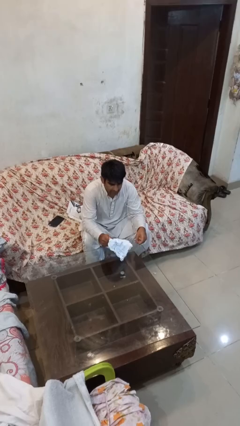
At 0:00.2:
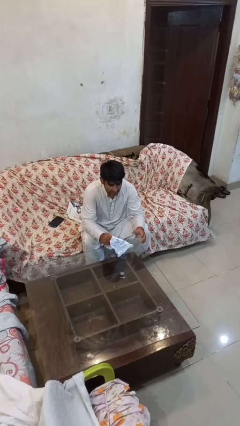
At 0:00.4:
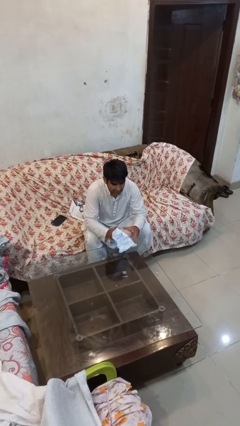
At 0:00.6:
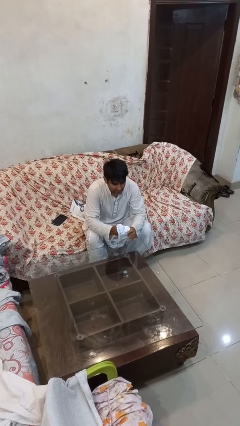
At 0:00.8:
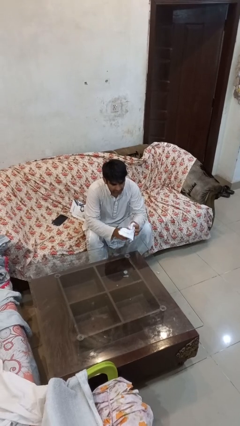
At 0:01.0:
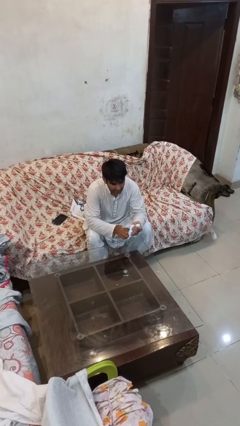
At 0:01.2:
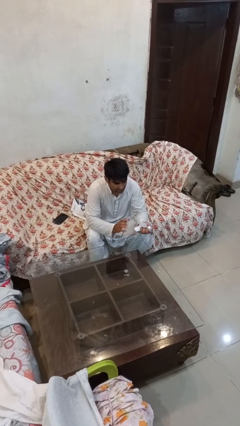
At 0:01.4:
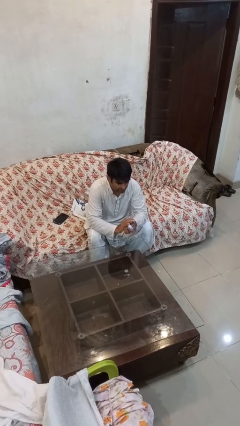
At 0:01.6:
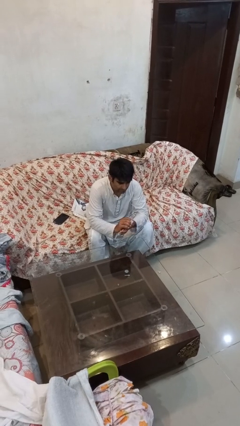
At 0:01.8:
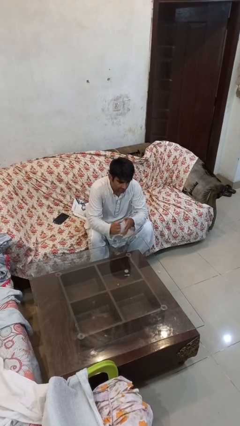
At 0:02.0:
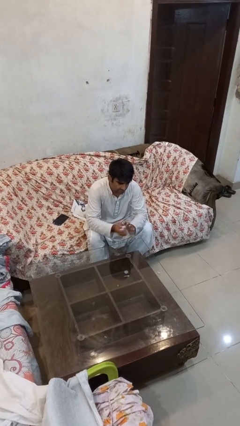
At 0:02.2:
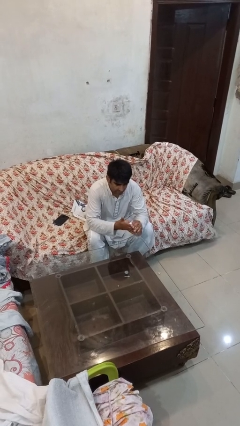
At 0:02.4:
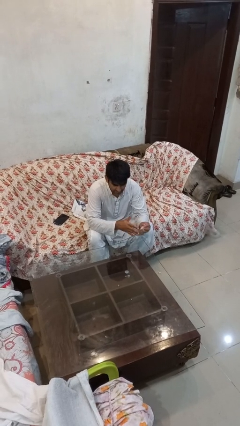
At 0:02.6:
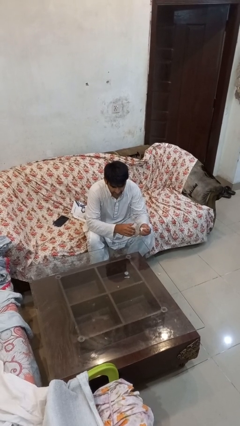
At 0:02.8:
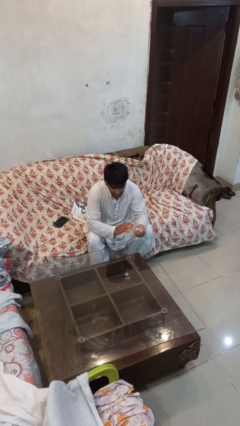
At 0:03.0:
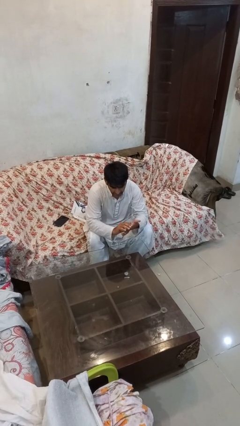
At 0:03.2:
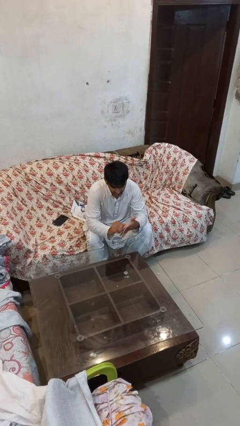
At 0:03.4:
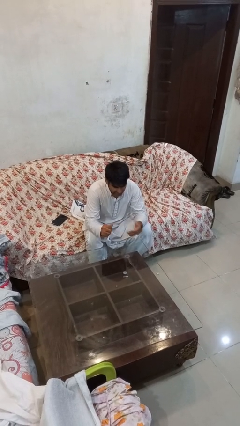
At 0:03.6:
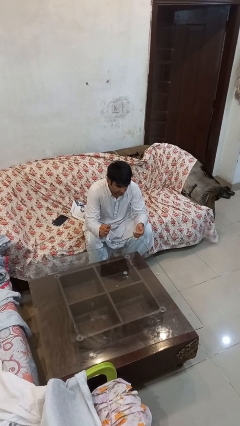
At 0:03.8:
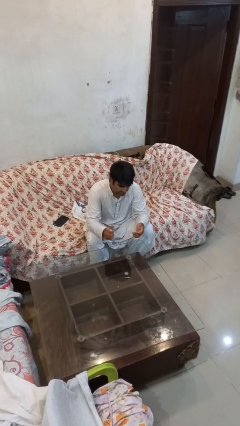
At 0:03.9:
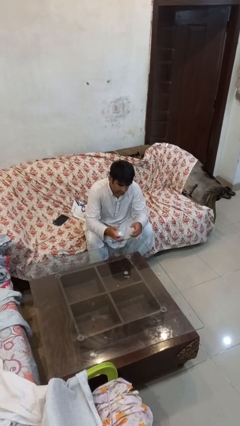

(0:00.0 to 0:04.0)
person crumples paper

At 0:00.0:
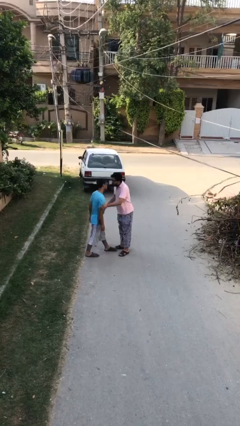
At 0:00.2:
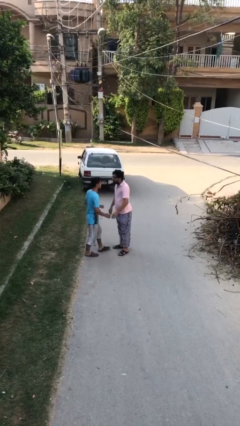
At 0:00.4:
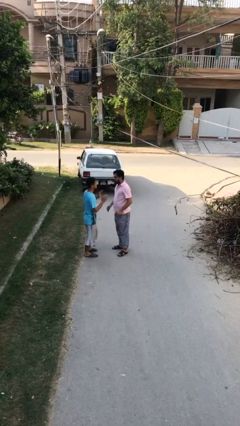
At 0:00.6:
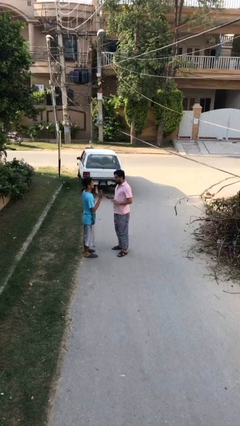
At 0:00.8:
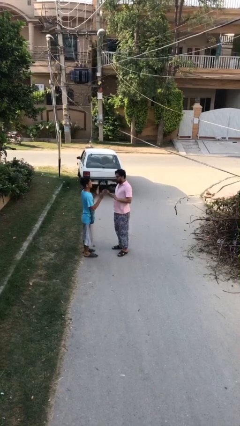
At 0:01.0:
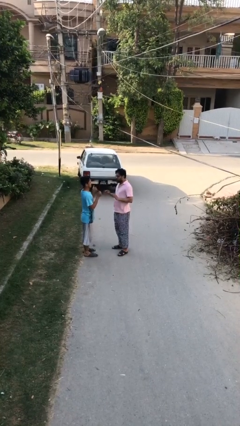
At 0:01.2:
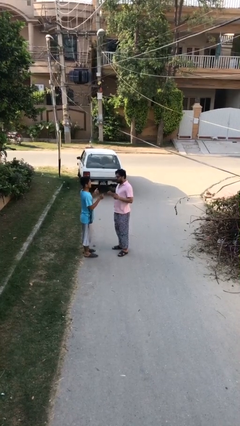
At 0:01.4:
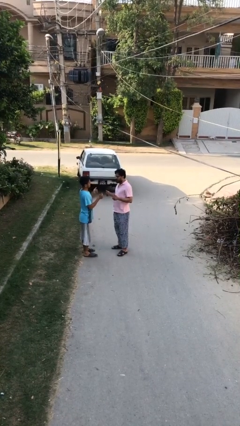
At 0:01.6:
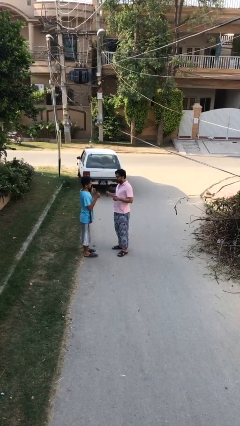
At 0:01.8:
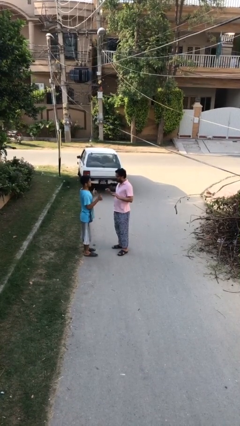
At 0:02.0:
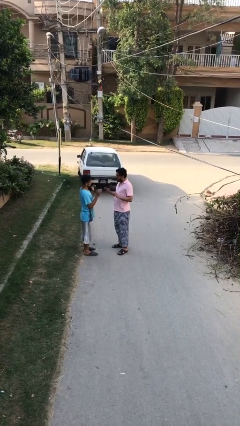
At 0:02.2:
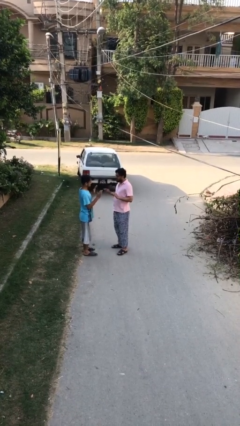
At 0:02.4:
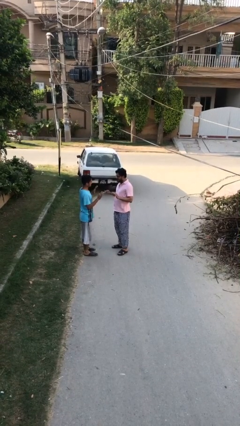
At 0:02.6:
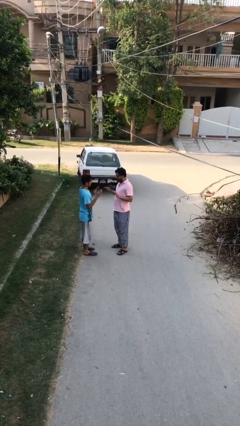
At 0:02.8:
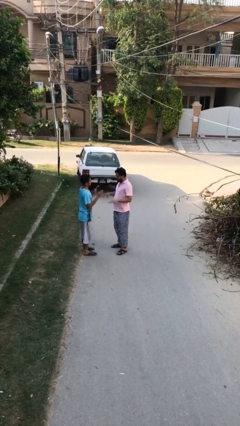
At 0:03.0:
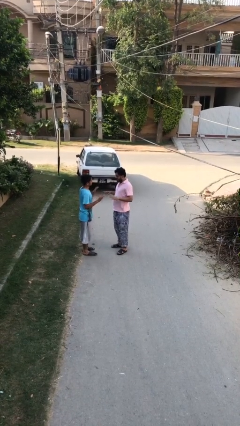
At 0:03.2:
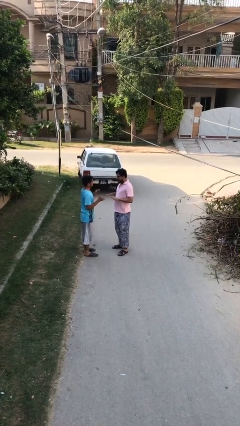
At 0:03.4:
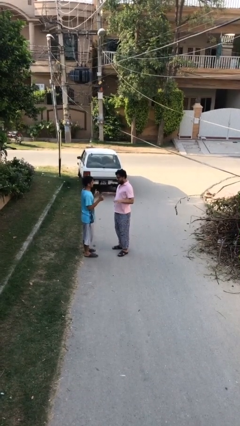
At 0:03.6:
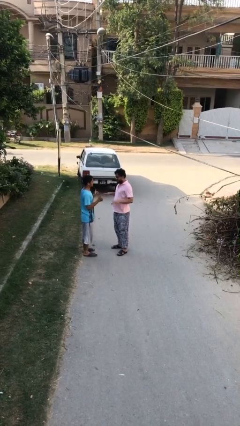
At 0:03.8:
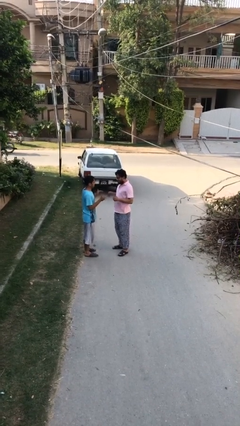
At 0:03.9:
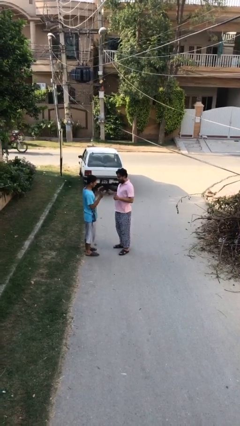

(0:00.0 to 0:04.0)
person talks to person

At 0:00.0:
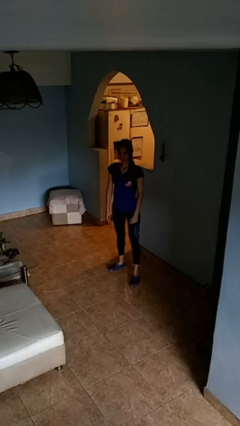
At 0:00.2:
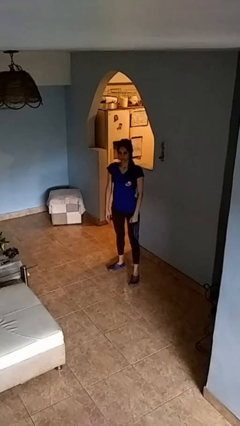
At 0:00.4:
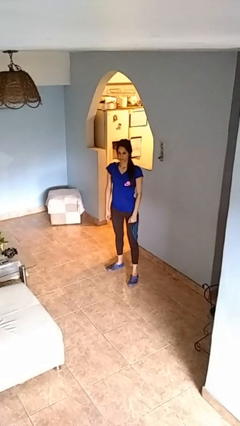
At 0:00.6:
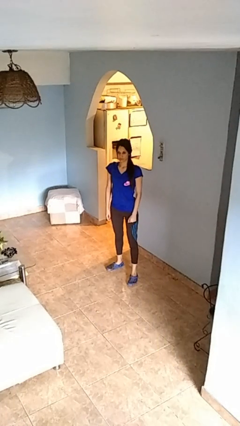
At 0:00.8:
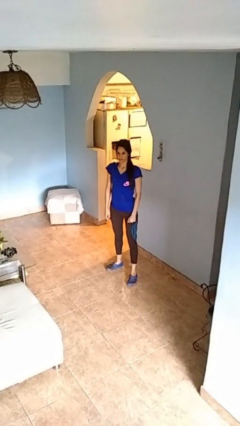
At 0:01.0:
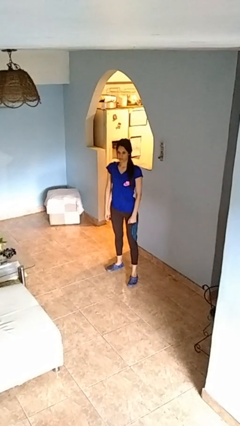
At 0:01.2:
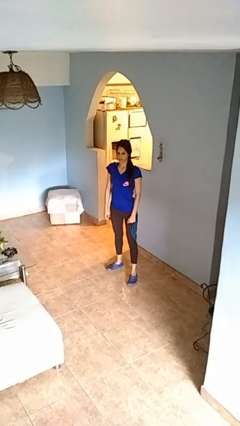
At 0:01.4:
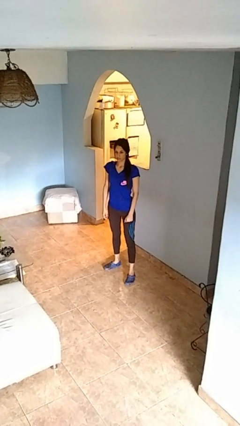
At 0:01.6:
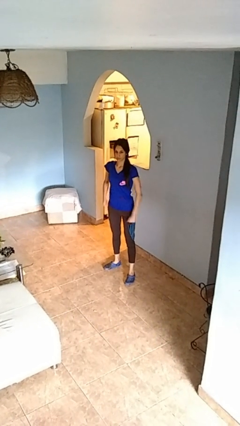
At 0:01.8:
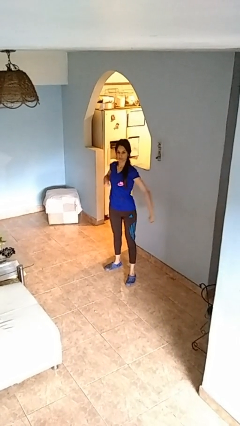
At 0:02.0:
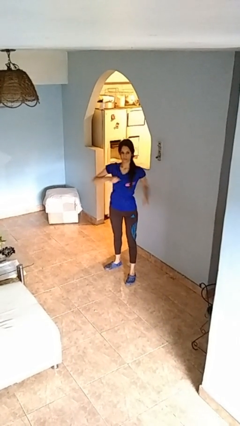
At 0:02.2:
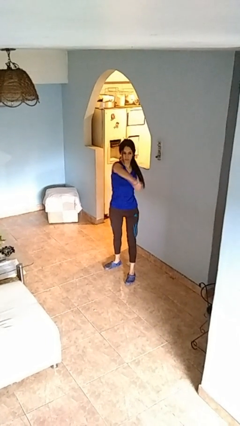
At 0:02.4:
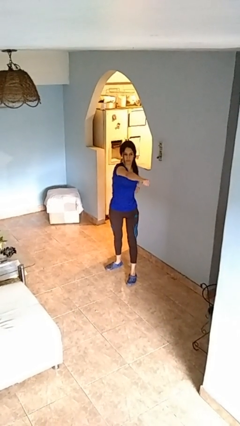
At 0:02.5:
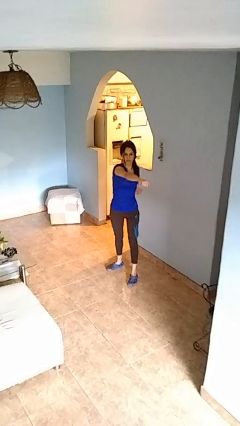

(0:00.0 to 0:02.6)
person punches

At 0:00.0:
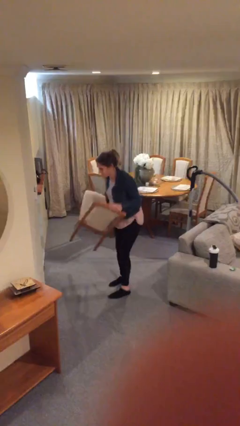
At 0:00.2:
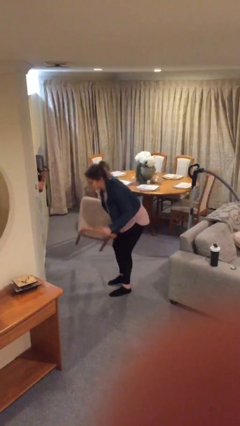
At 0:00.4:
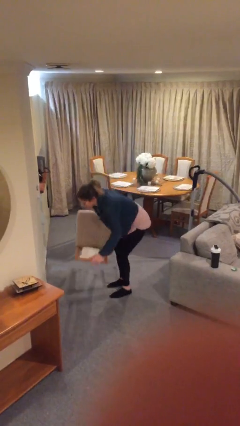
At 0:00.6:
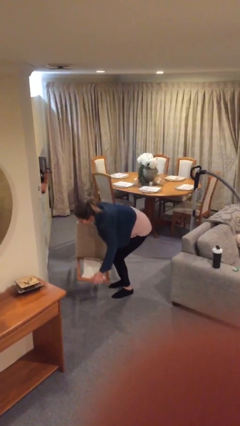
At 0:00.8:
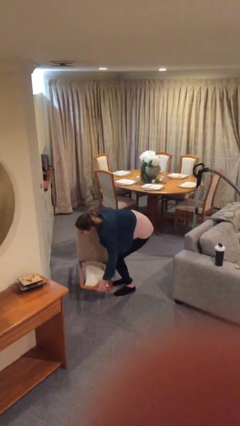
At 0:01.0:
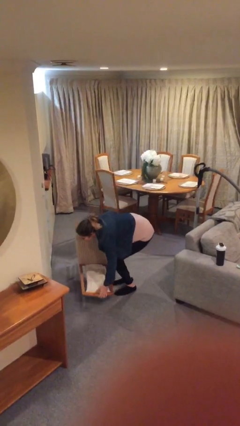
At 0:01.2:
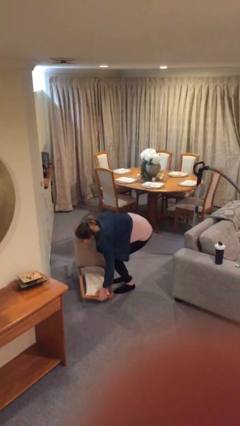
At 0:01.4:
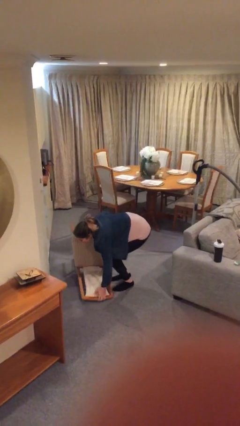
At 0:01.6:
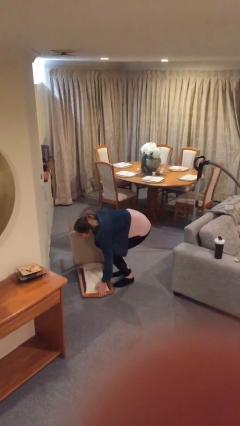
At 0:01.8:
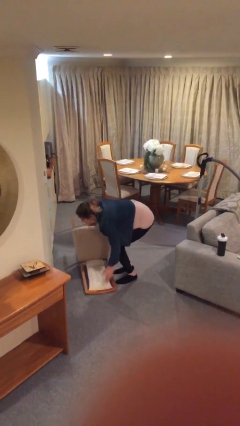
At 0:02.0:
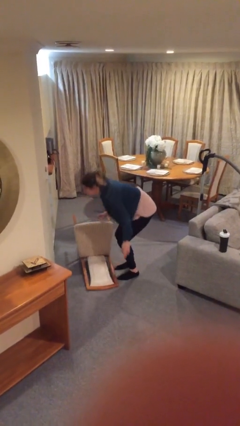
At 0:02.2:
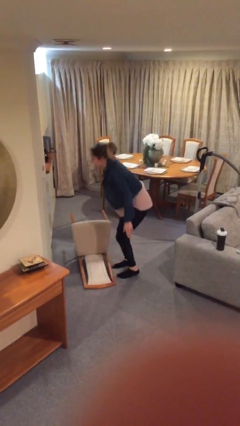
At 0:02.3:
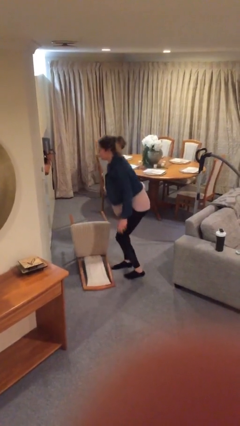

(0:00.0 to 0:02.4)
person puts down object on floor

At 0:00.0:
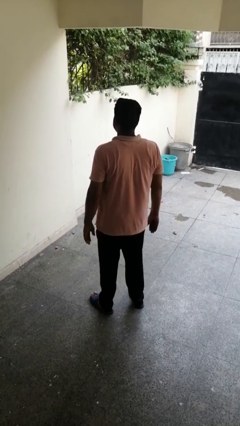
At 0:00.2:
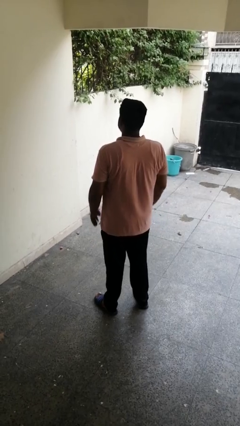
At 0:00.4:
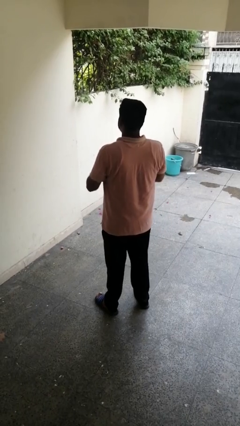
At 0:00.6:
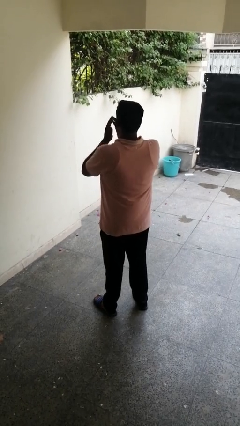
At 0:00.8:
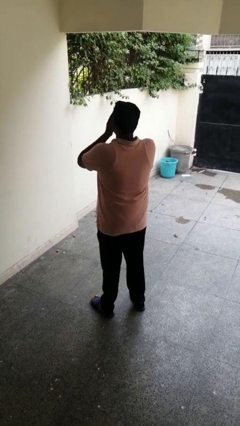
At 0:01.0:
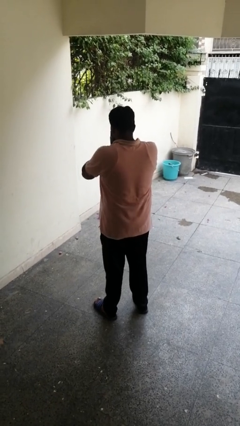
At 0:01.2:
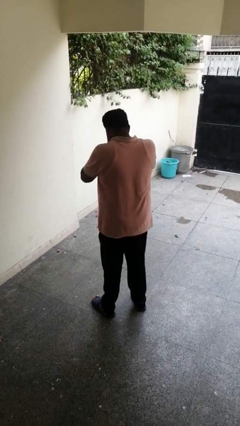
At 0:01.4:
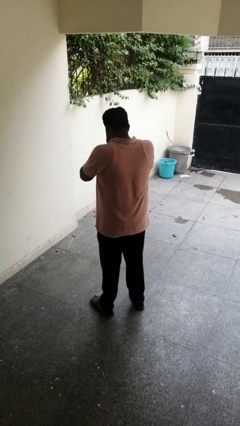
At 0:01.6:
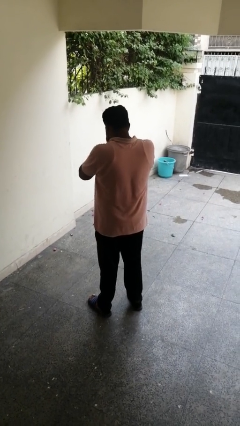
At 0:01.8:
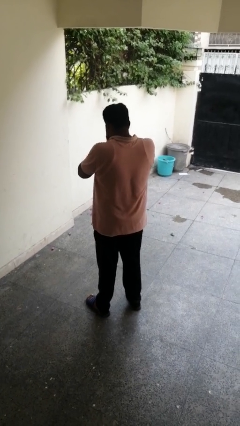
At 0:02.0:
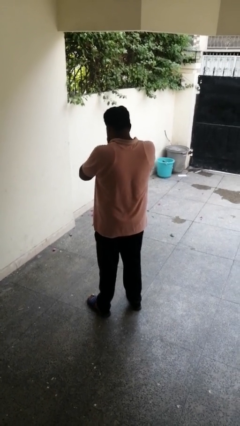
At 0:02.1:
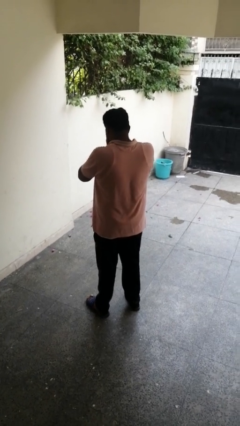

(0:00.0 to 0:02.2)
person sneezes into hand

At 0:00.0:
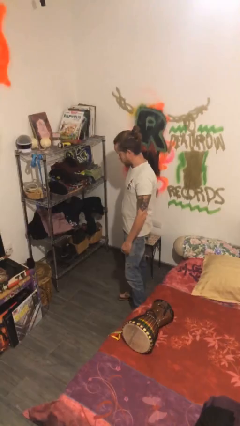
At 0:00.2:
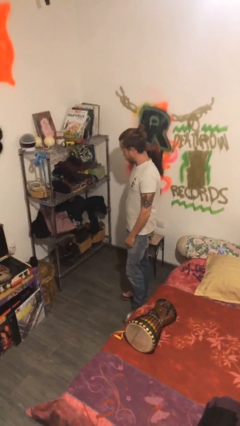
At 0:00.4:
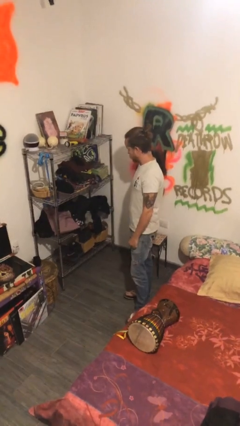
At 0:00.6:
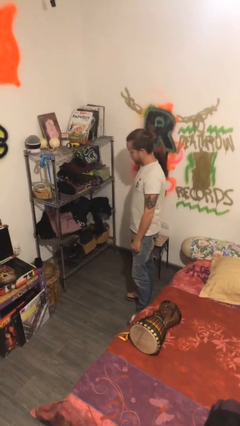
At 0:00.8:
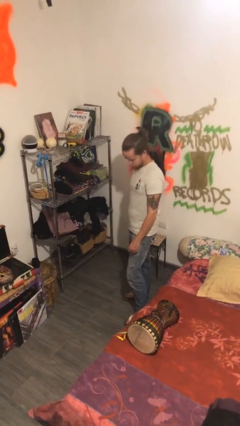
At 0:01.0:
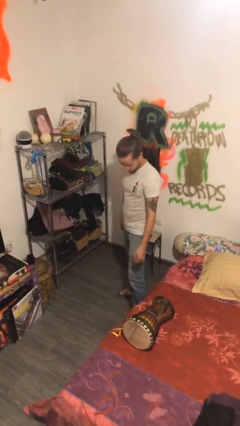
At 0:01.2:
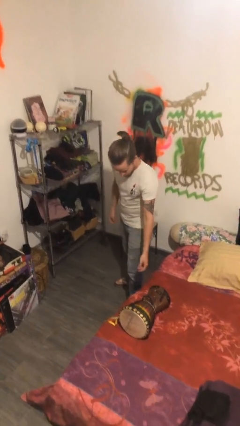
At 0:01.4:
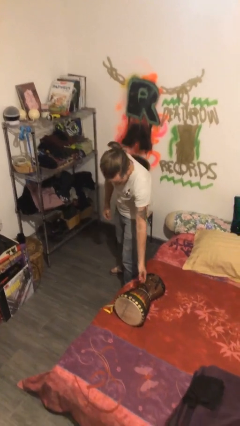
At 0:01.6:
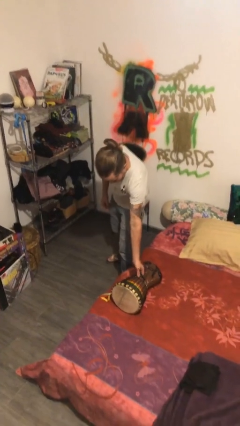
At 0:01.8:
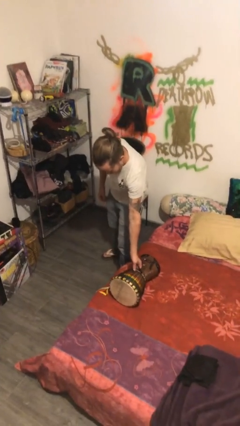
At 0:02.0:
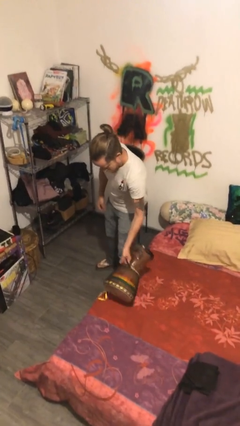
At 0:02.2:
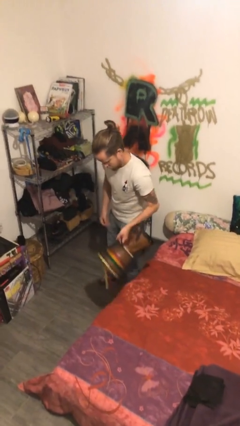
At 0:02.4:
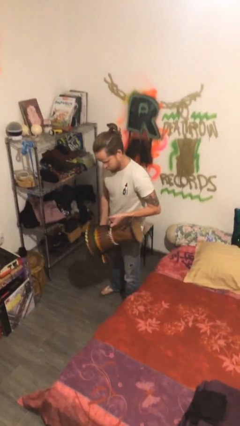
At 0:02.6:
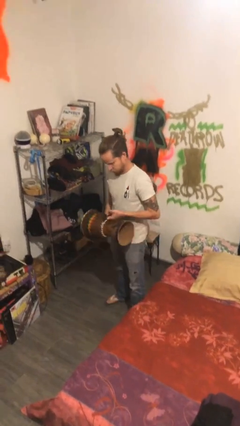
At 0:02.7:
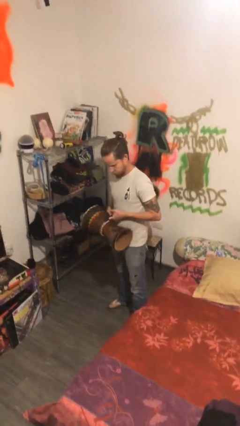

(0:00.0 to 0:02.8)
person picks up object from bed
